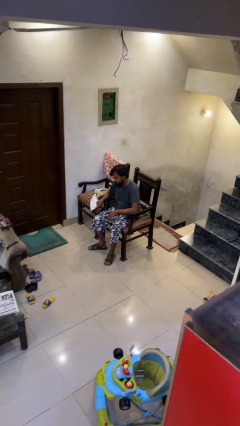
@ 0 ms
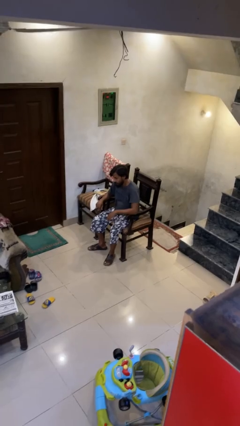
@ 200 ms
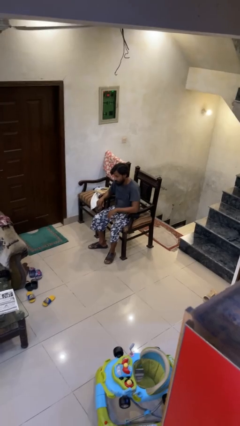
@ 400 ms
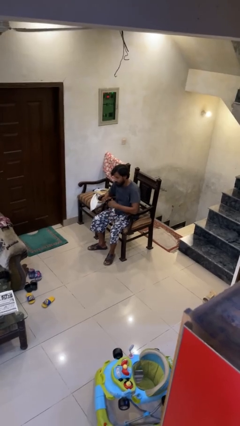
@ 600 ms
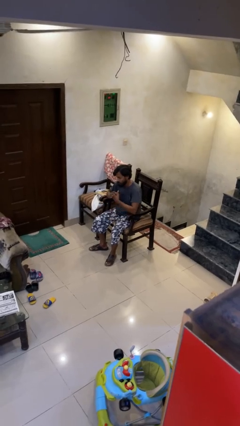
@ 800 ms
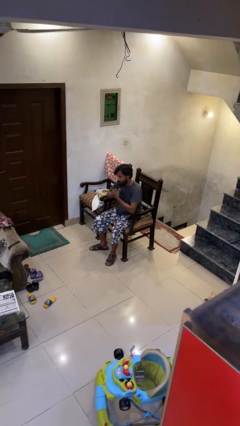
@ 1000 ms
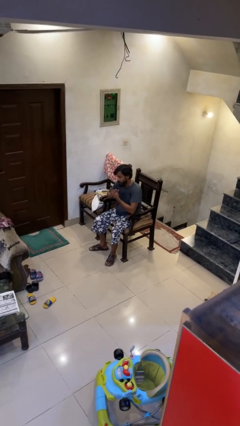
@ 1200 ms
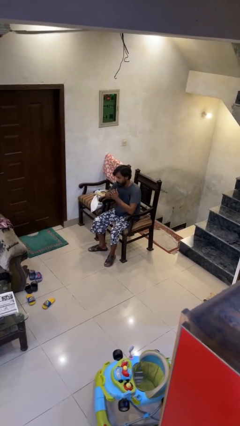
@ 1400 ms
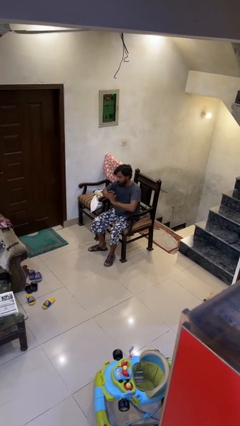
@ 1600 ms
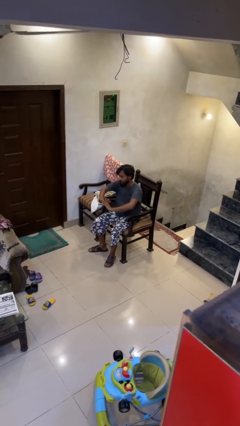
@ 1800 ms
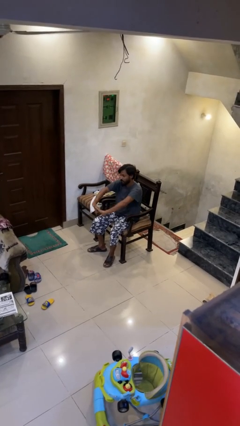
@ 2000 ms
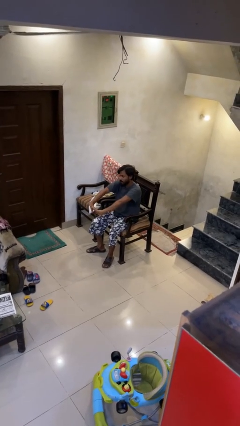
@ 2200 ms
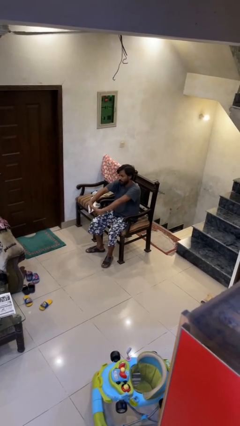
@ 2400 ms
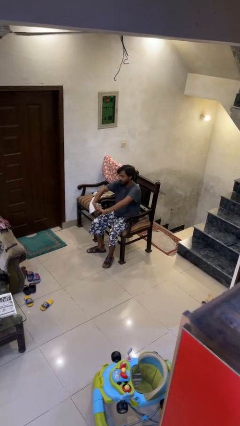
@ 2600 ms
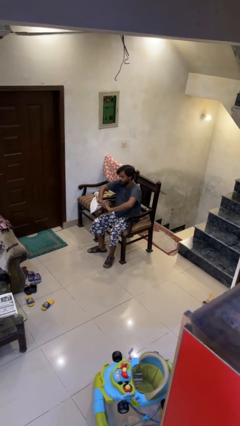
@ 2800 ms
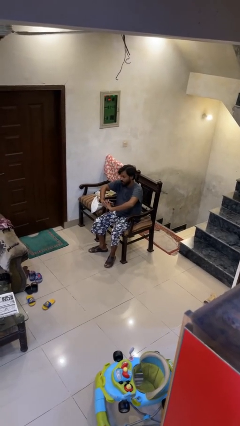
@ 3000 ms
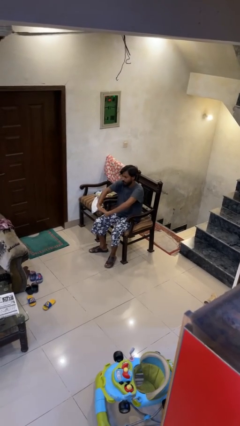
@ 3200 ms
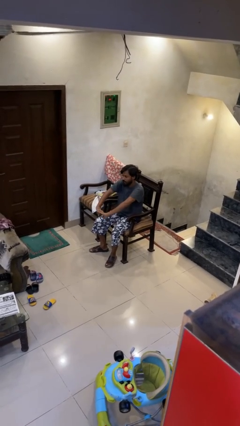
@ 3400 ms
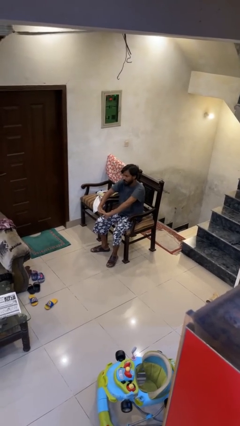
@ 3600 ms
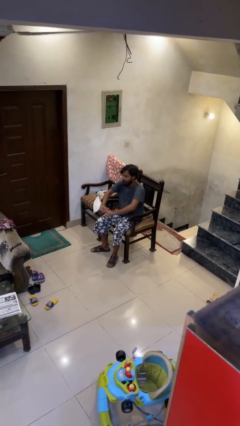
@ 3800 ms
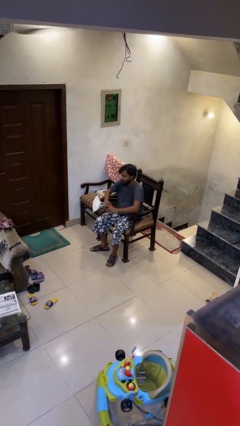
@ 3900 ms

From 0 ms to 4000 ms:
person cracks knuckles

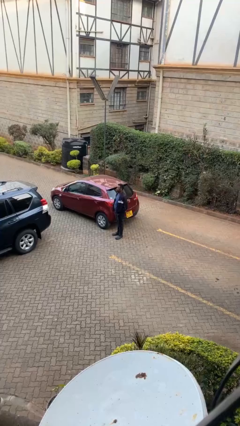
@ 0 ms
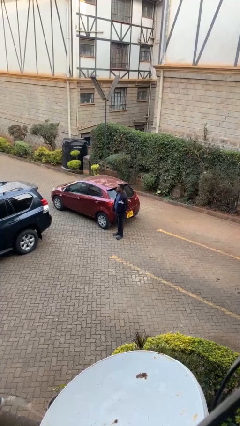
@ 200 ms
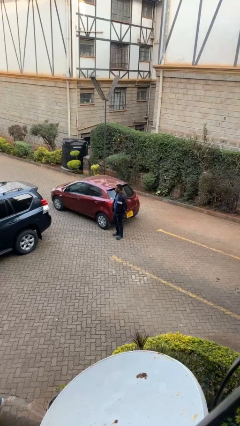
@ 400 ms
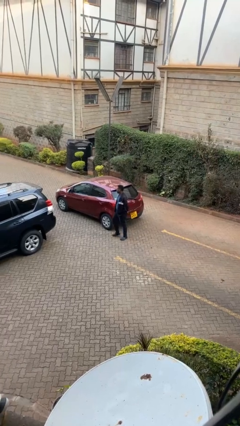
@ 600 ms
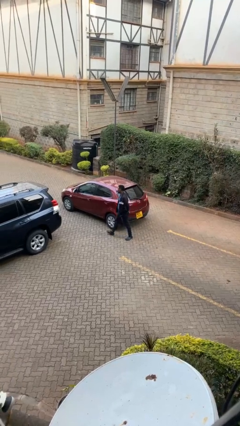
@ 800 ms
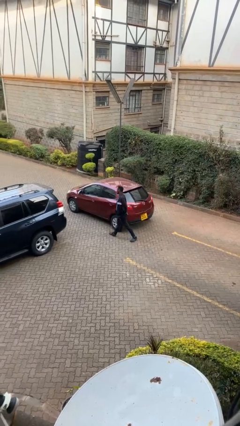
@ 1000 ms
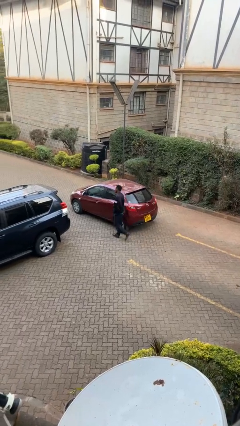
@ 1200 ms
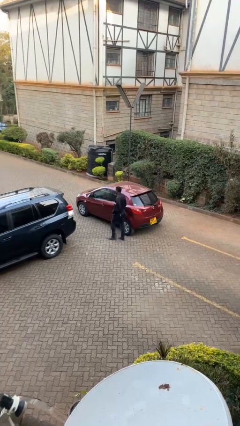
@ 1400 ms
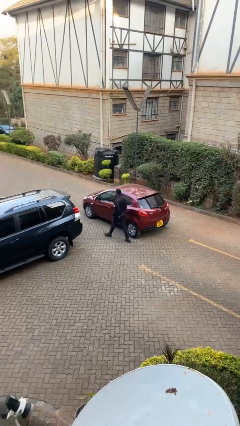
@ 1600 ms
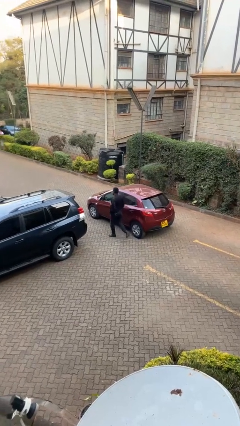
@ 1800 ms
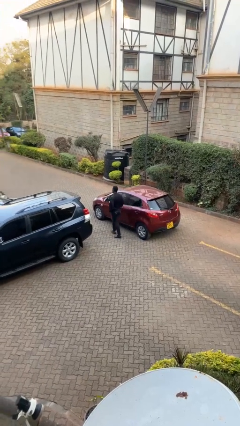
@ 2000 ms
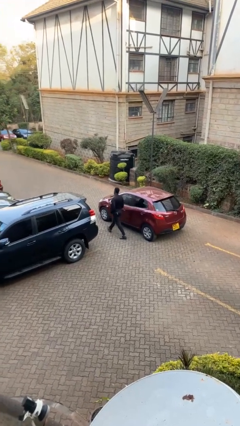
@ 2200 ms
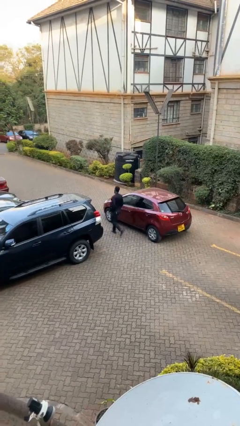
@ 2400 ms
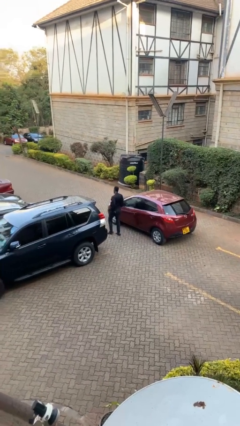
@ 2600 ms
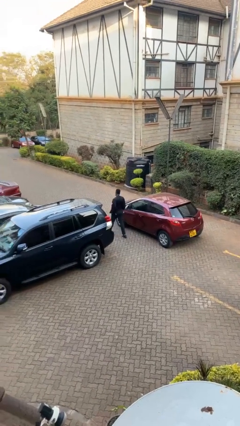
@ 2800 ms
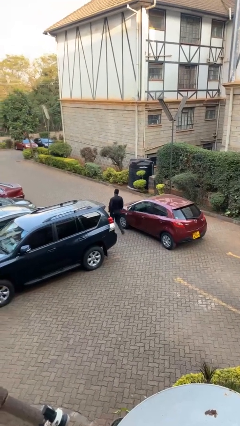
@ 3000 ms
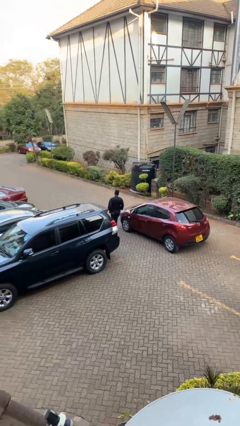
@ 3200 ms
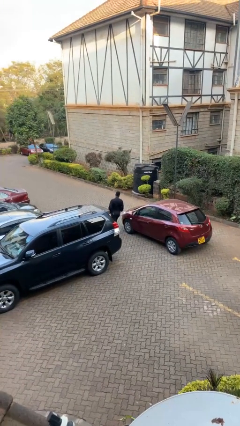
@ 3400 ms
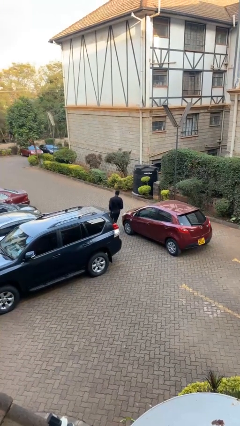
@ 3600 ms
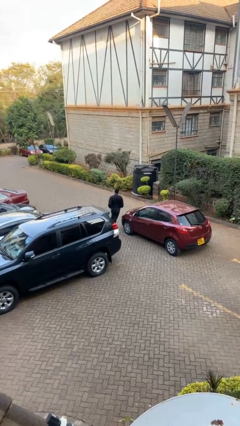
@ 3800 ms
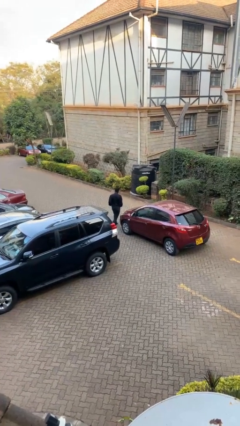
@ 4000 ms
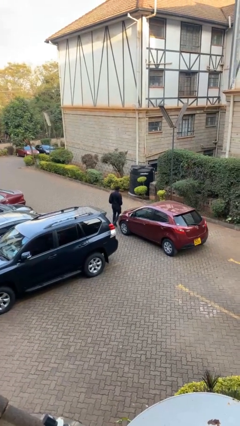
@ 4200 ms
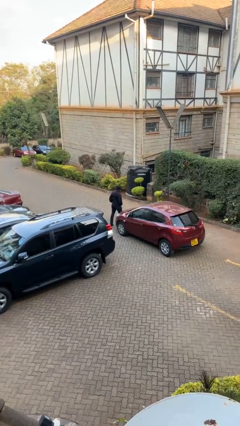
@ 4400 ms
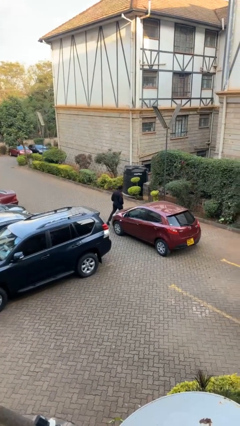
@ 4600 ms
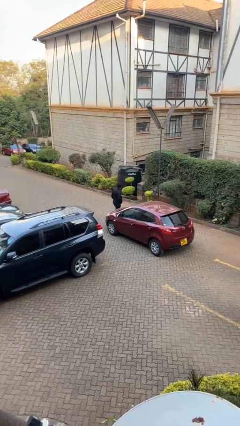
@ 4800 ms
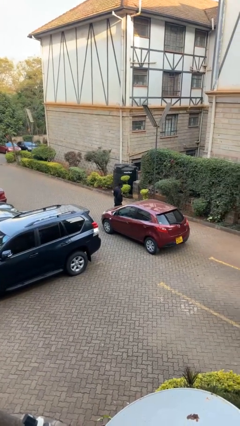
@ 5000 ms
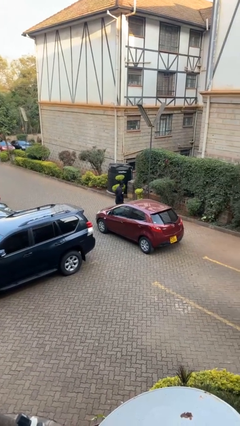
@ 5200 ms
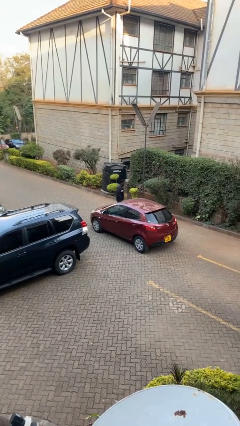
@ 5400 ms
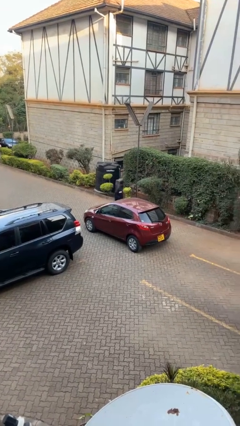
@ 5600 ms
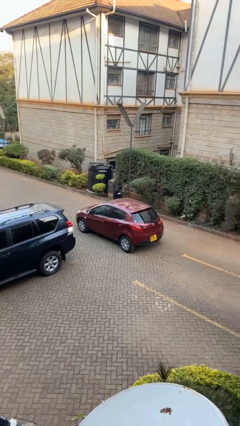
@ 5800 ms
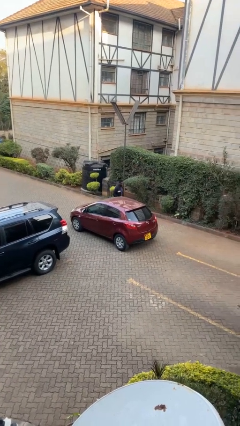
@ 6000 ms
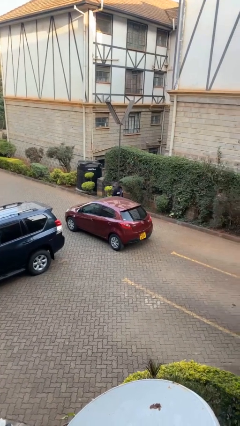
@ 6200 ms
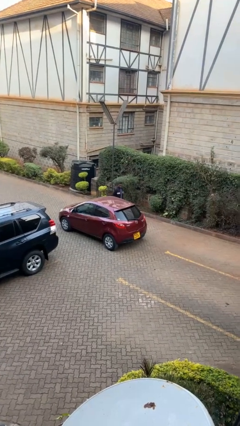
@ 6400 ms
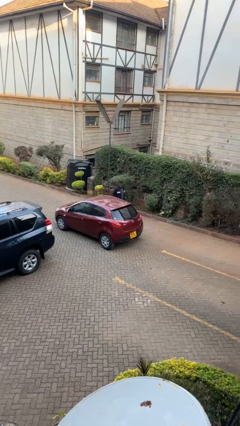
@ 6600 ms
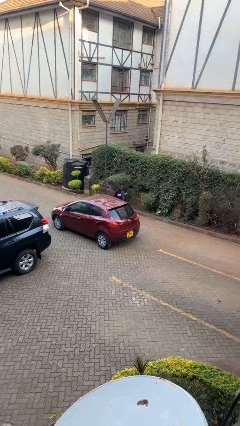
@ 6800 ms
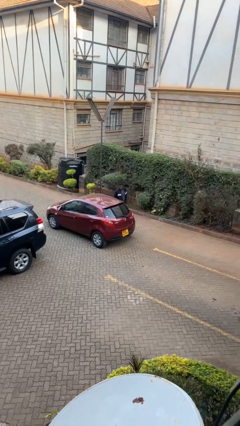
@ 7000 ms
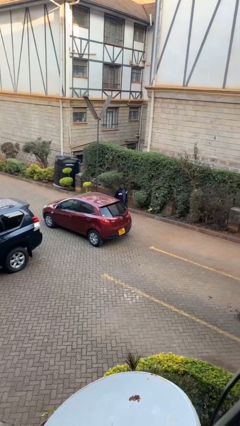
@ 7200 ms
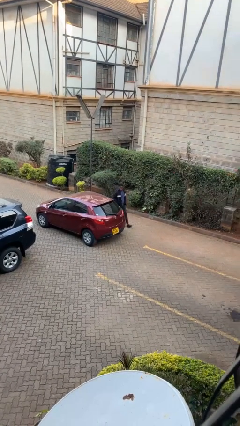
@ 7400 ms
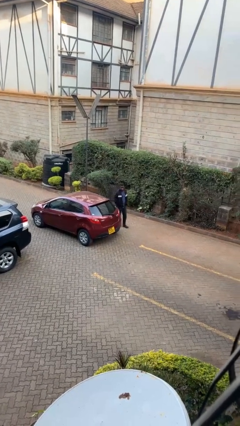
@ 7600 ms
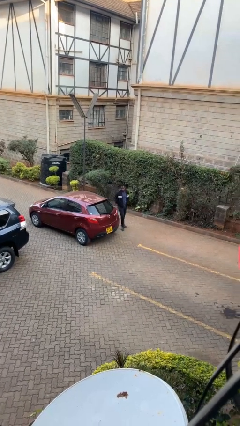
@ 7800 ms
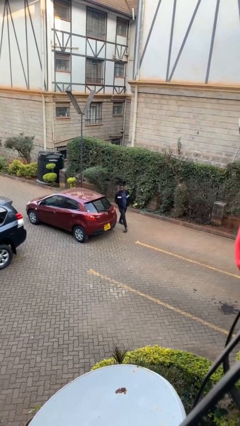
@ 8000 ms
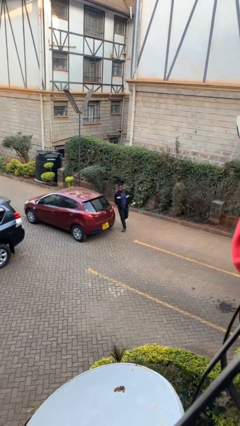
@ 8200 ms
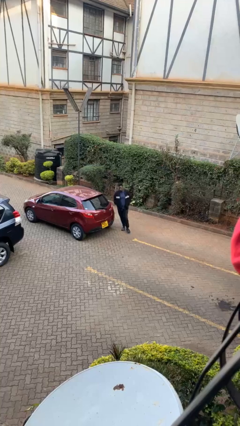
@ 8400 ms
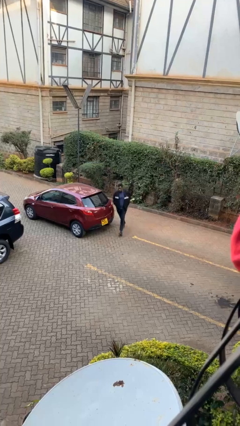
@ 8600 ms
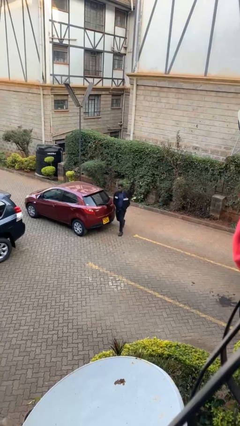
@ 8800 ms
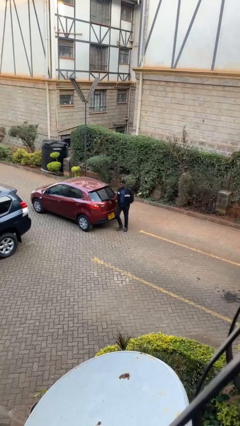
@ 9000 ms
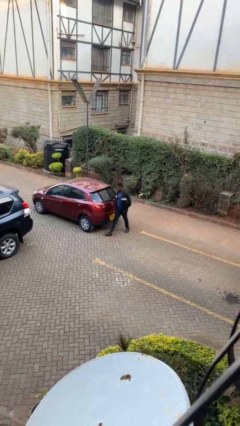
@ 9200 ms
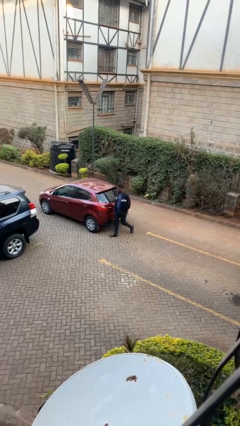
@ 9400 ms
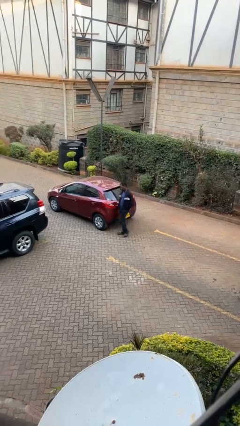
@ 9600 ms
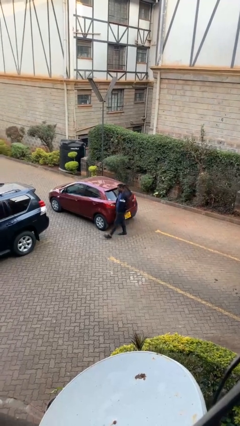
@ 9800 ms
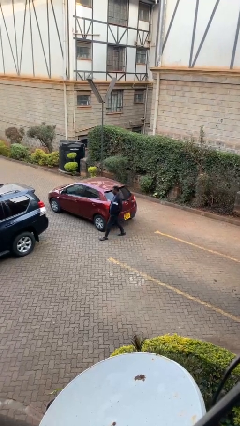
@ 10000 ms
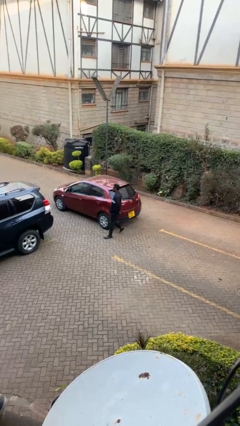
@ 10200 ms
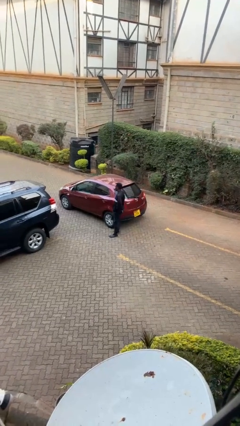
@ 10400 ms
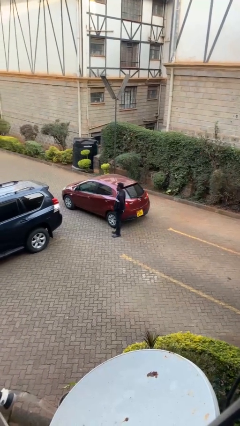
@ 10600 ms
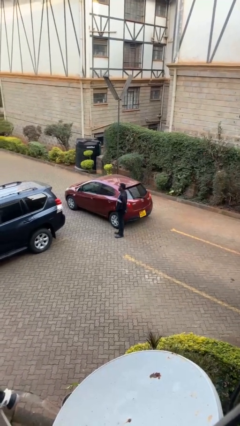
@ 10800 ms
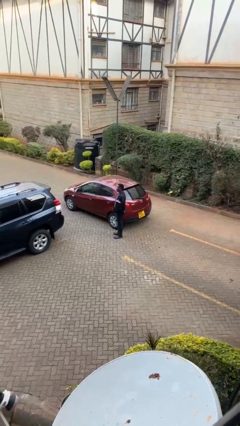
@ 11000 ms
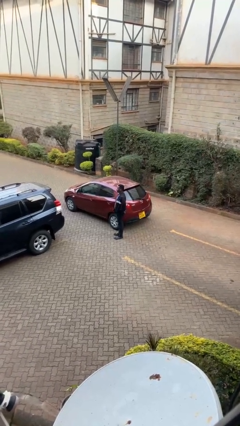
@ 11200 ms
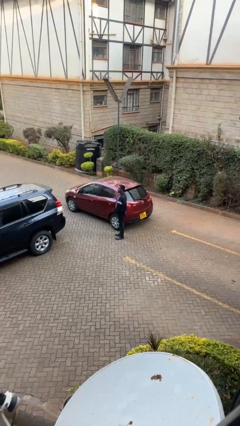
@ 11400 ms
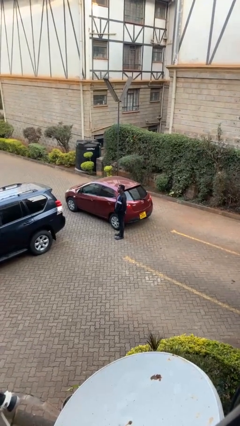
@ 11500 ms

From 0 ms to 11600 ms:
person walks around car

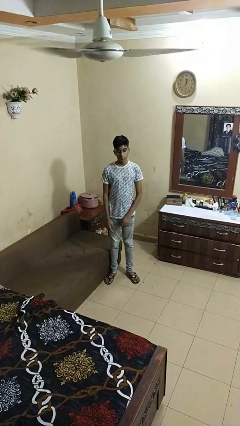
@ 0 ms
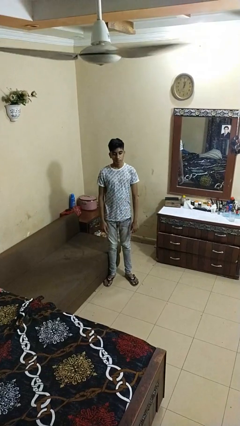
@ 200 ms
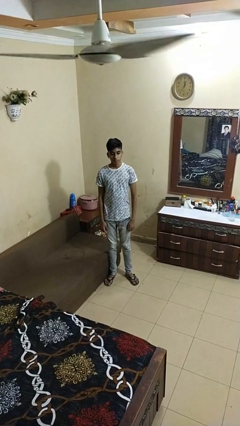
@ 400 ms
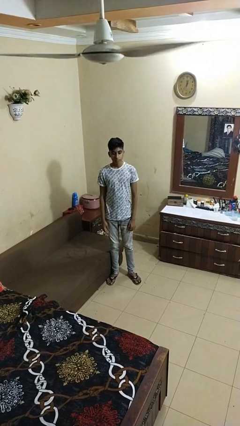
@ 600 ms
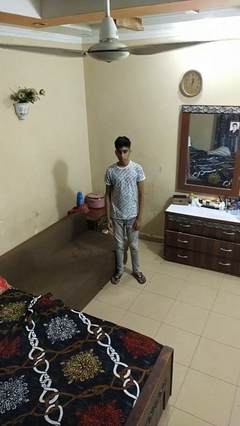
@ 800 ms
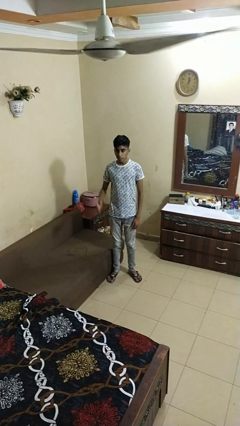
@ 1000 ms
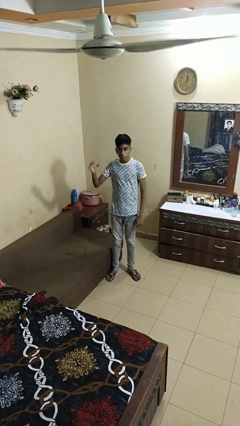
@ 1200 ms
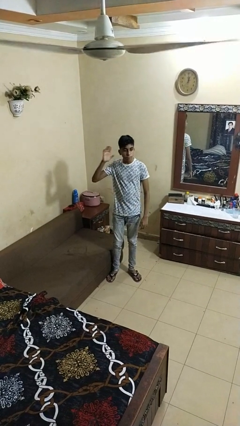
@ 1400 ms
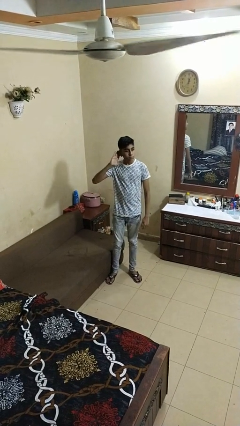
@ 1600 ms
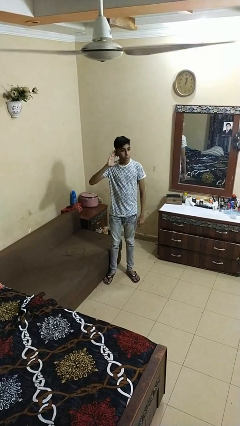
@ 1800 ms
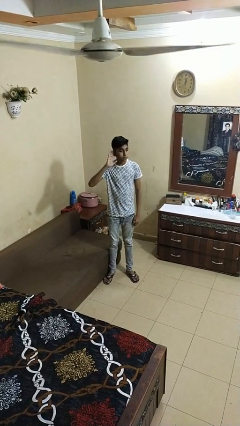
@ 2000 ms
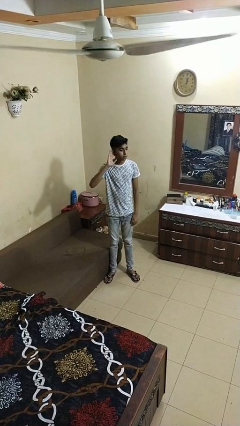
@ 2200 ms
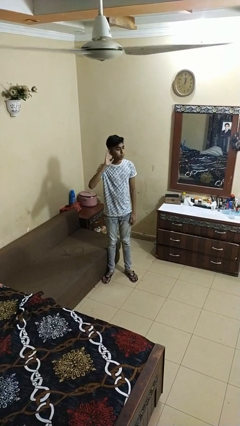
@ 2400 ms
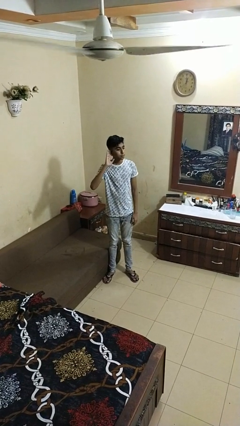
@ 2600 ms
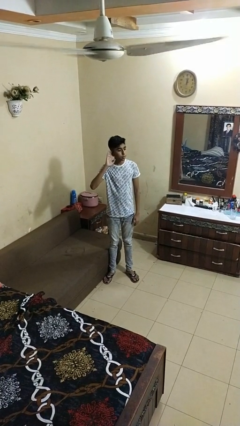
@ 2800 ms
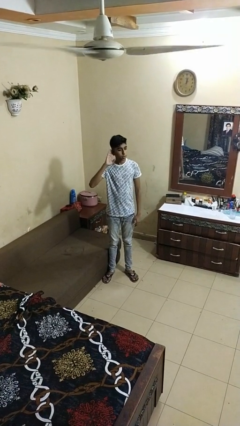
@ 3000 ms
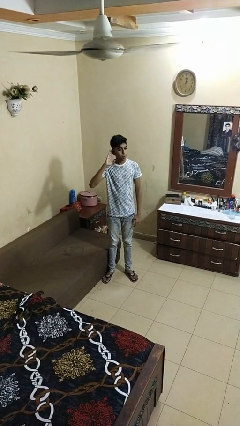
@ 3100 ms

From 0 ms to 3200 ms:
person gestures listen closely
